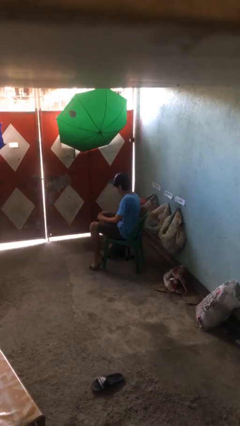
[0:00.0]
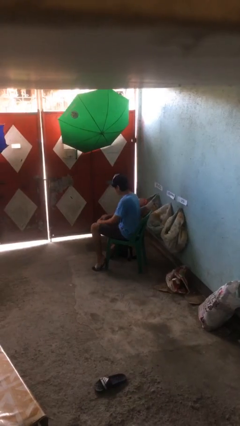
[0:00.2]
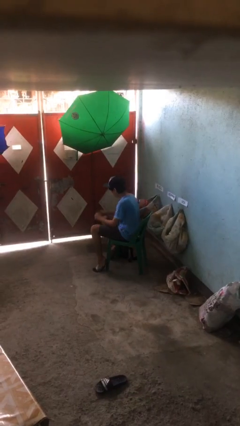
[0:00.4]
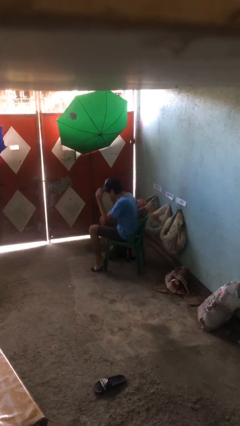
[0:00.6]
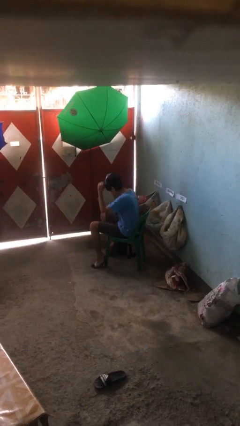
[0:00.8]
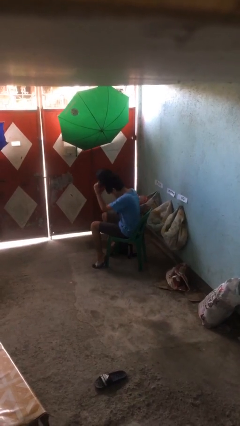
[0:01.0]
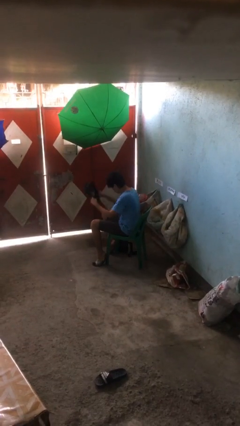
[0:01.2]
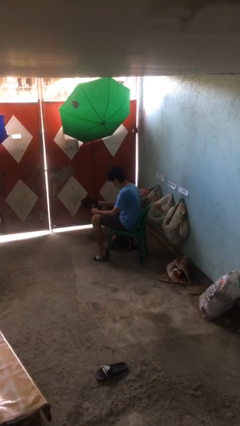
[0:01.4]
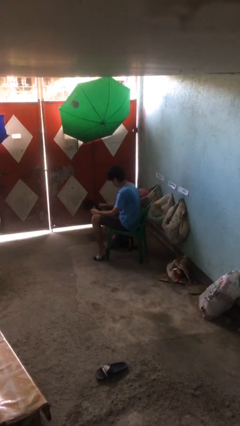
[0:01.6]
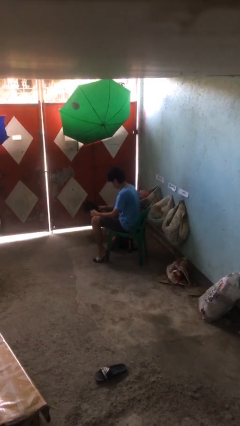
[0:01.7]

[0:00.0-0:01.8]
person takes off hat

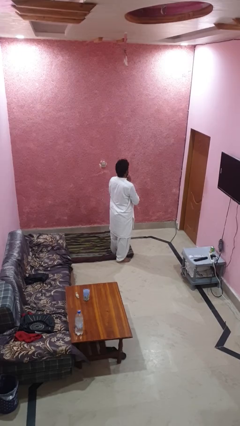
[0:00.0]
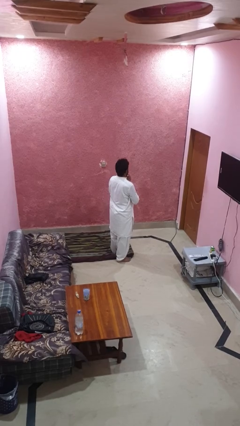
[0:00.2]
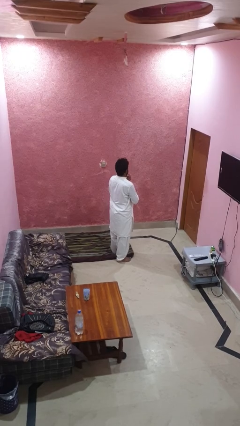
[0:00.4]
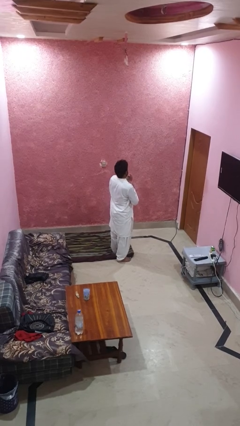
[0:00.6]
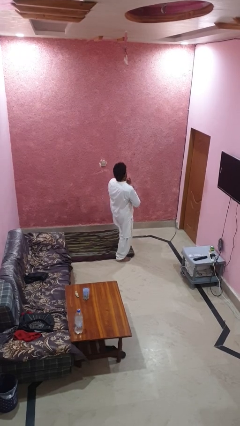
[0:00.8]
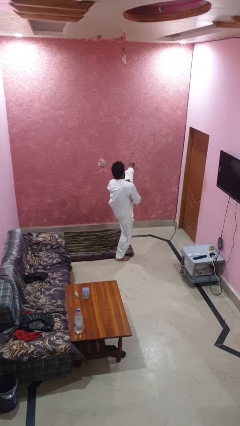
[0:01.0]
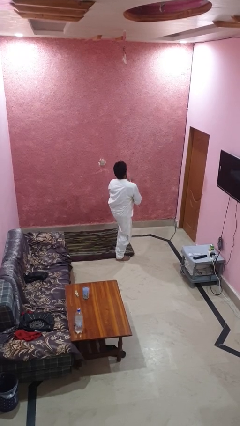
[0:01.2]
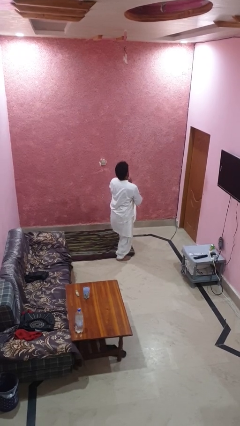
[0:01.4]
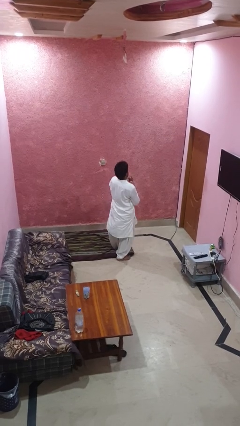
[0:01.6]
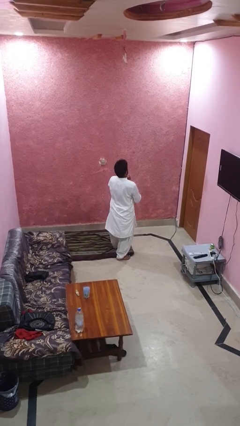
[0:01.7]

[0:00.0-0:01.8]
person karate kicks

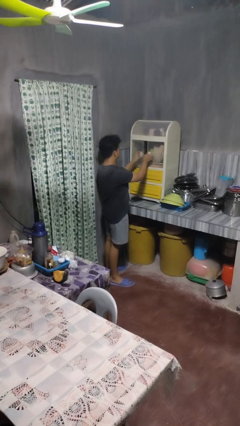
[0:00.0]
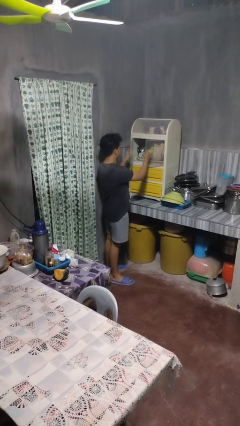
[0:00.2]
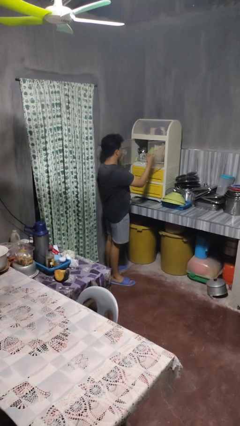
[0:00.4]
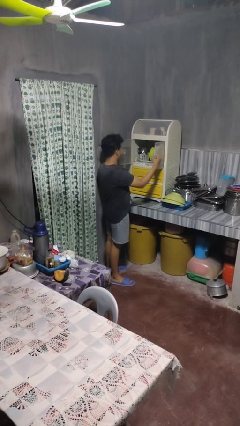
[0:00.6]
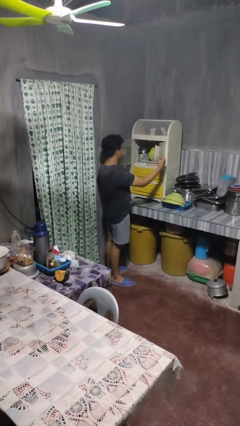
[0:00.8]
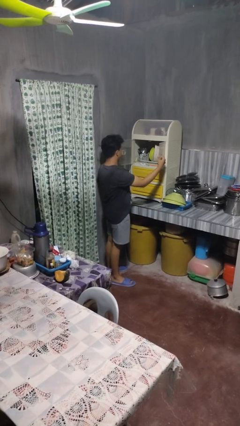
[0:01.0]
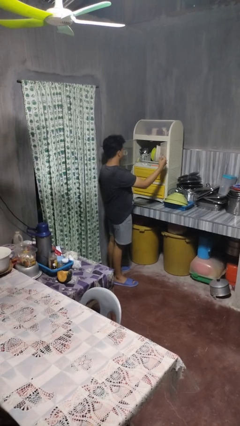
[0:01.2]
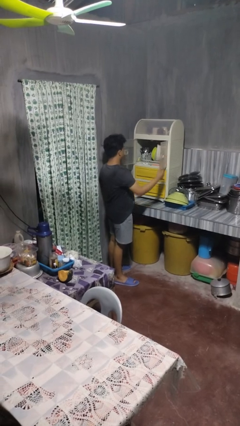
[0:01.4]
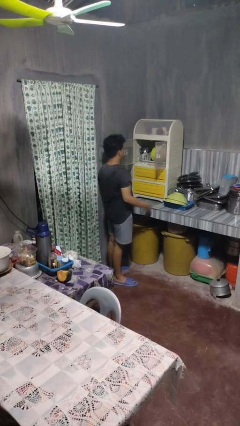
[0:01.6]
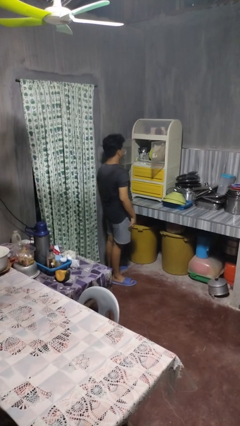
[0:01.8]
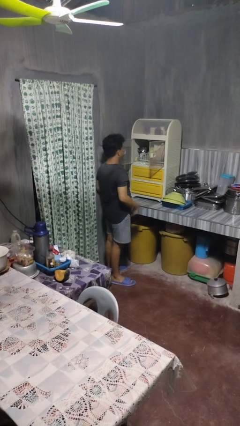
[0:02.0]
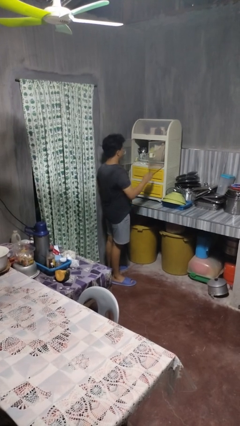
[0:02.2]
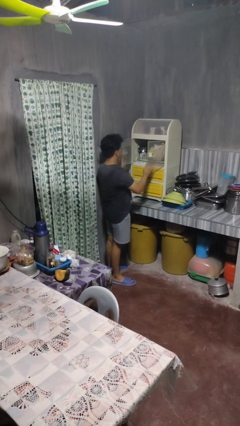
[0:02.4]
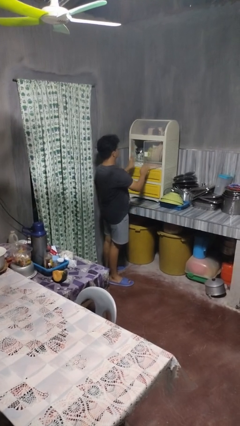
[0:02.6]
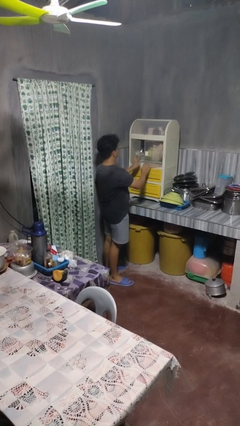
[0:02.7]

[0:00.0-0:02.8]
person opens cabinet

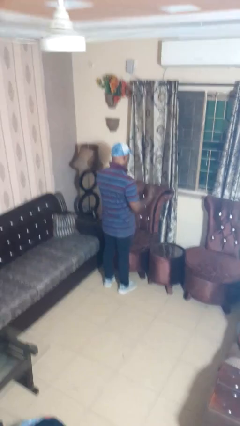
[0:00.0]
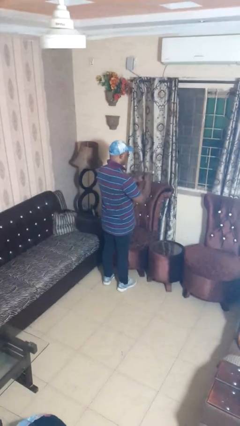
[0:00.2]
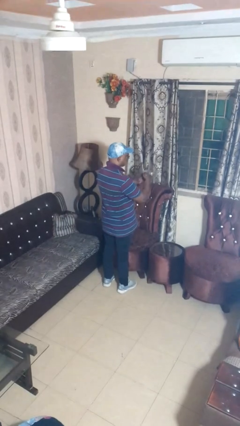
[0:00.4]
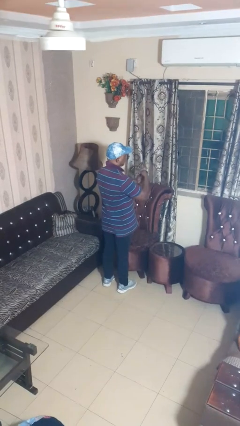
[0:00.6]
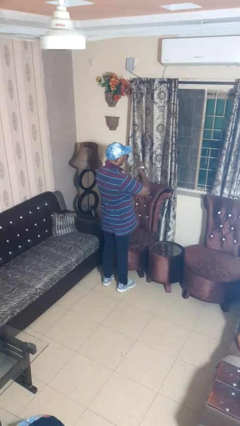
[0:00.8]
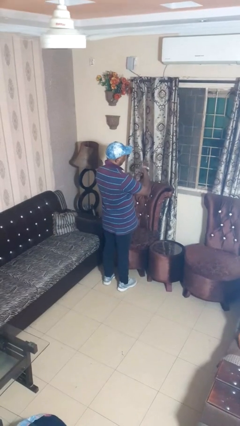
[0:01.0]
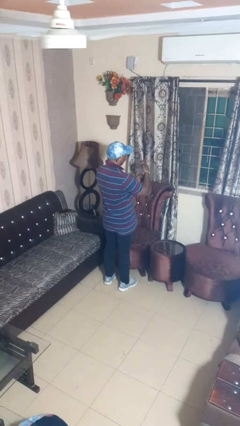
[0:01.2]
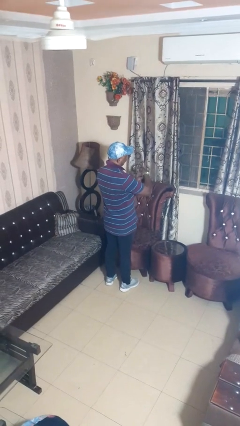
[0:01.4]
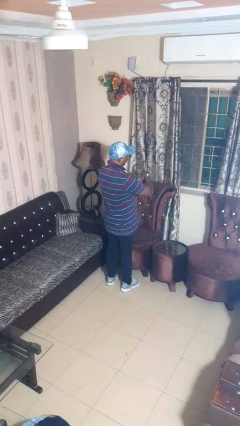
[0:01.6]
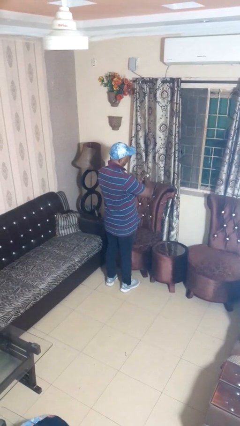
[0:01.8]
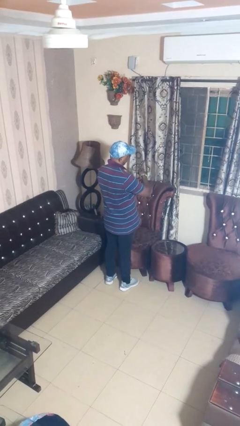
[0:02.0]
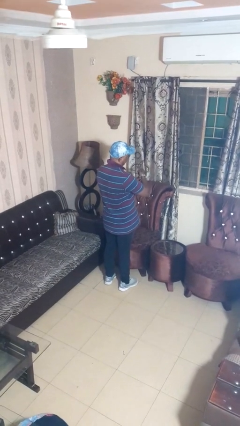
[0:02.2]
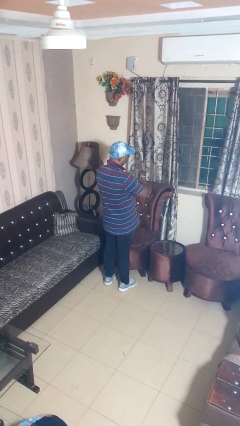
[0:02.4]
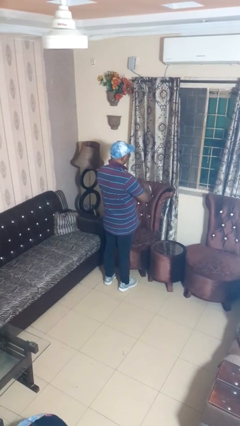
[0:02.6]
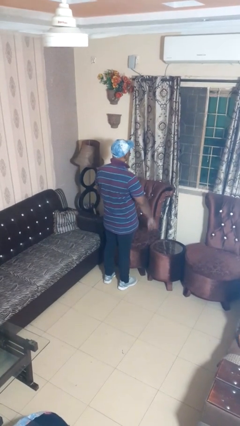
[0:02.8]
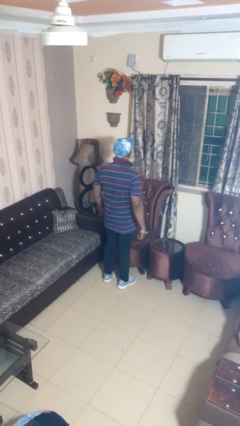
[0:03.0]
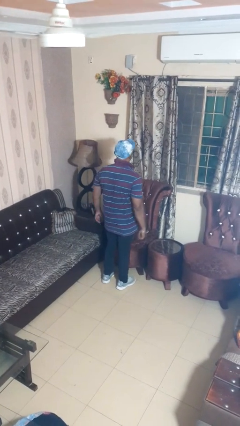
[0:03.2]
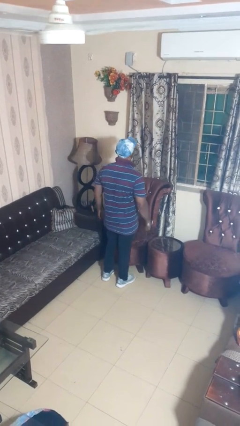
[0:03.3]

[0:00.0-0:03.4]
person puts on wristwatch

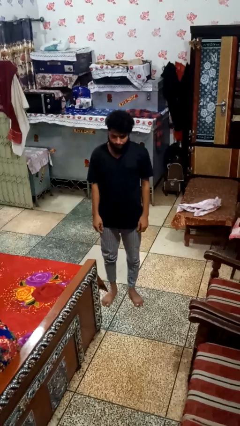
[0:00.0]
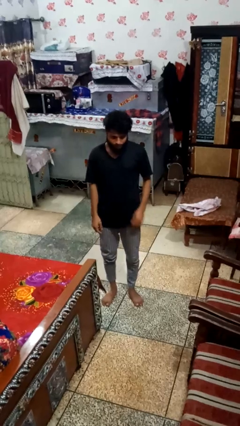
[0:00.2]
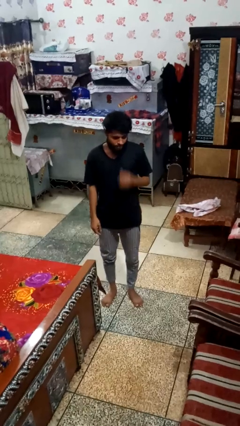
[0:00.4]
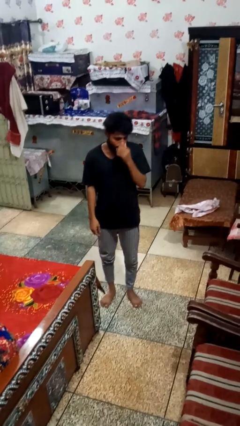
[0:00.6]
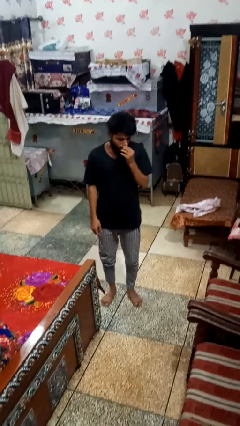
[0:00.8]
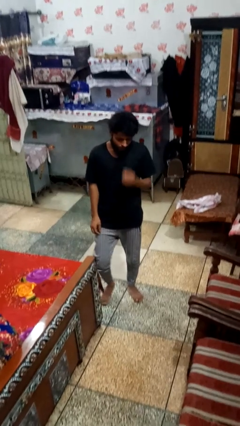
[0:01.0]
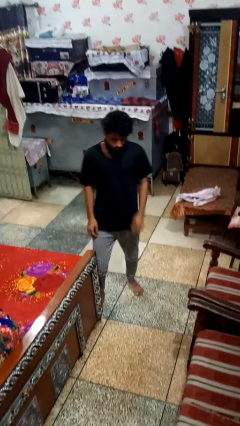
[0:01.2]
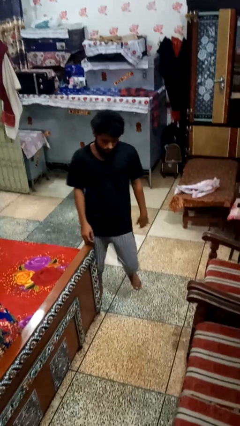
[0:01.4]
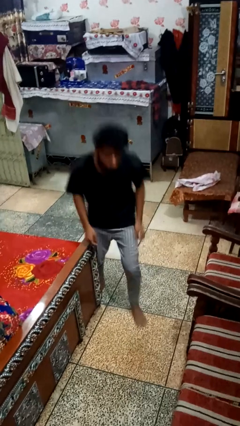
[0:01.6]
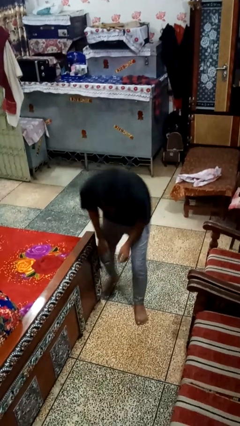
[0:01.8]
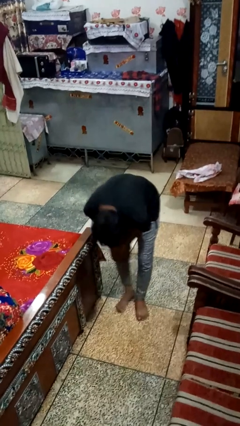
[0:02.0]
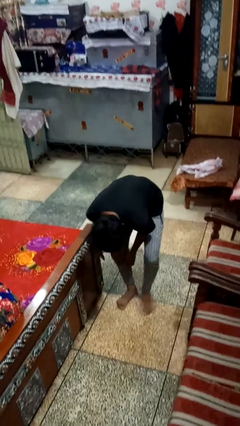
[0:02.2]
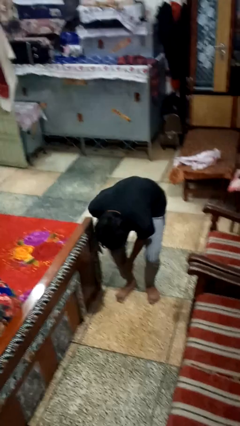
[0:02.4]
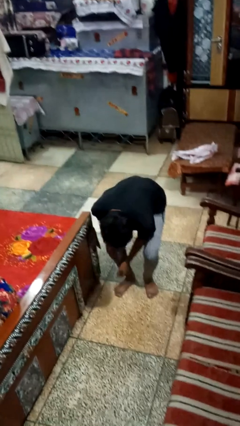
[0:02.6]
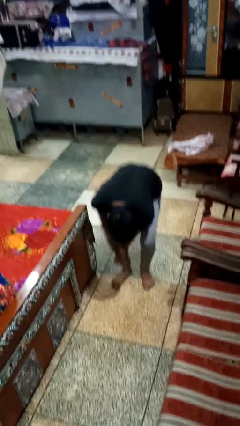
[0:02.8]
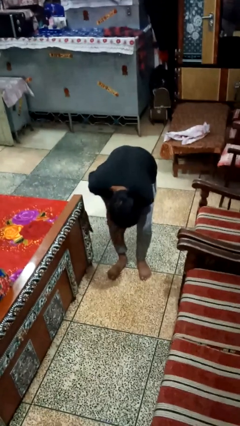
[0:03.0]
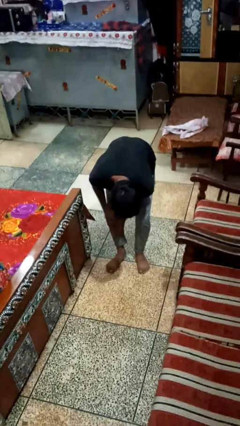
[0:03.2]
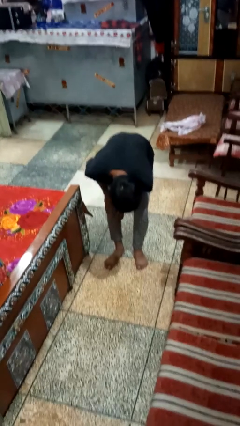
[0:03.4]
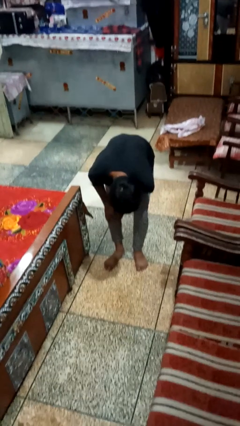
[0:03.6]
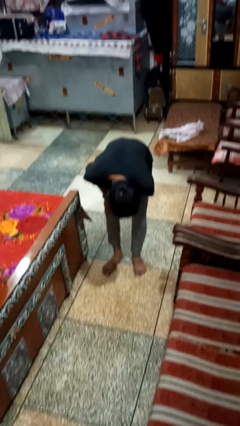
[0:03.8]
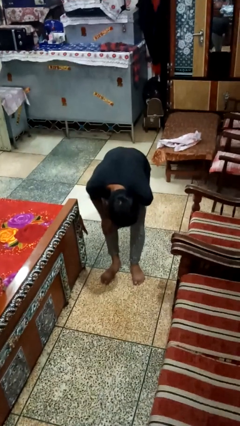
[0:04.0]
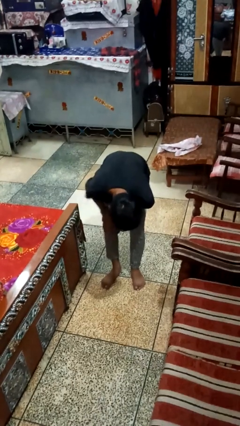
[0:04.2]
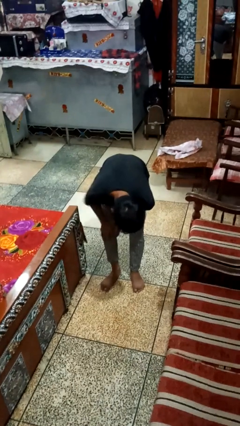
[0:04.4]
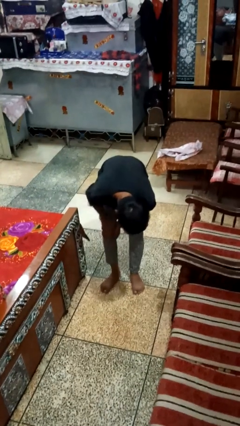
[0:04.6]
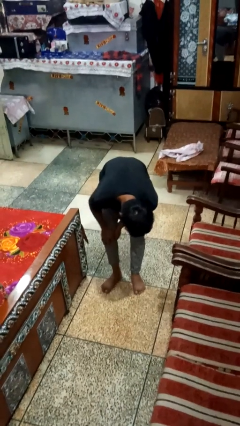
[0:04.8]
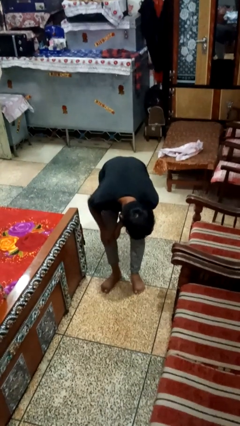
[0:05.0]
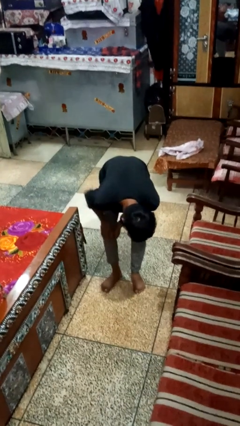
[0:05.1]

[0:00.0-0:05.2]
person trips on object on floor

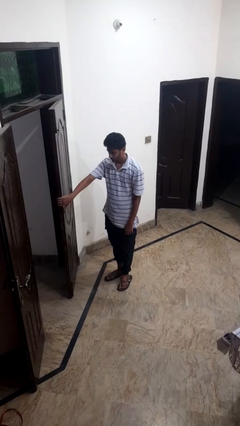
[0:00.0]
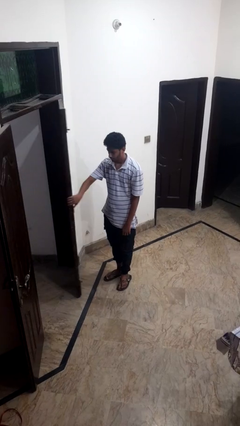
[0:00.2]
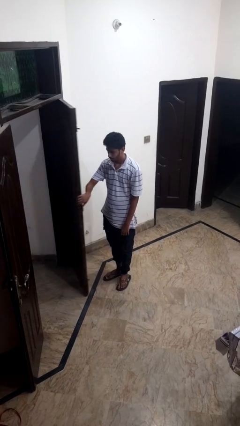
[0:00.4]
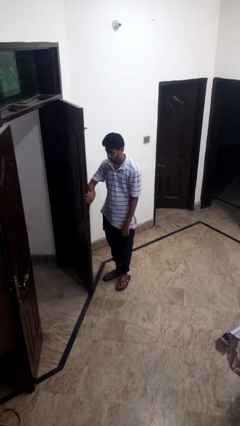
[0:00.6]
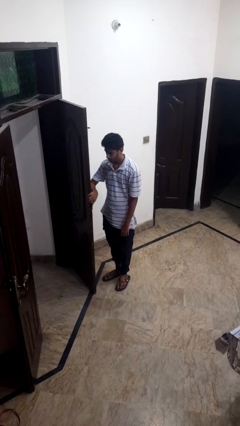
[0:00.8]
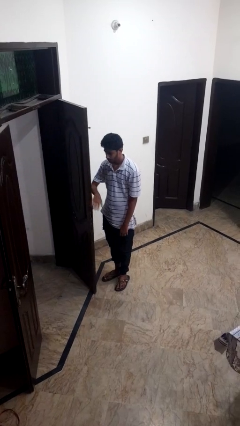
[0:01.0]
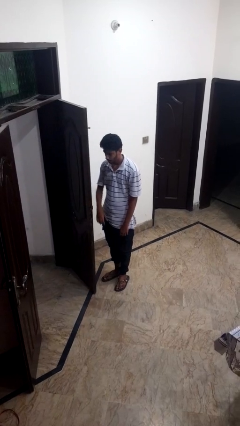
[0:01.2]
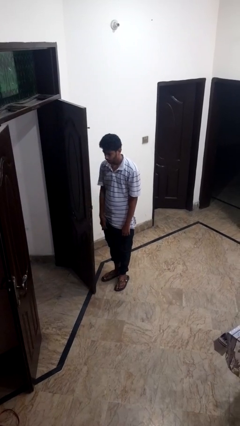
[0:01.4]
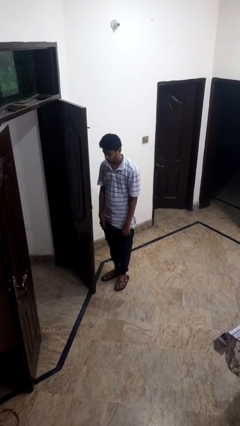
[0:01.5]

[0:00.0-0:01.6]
person opens facility door

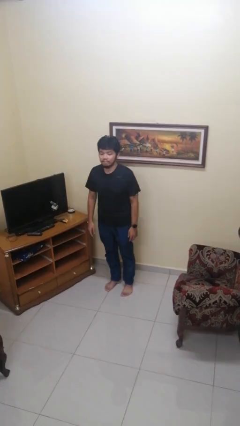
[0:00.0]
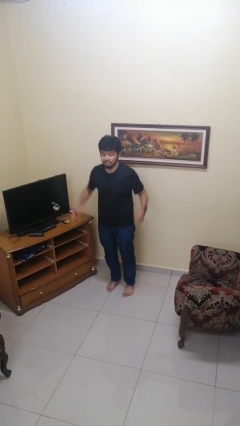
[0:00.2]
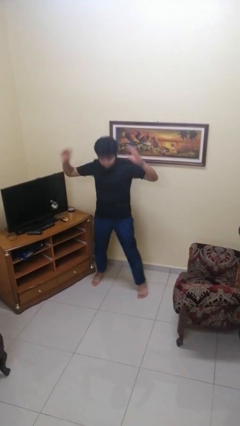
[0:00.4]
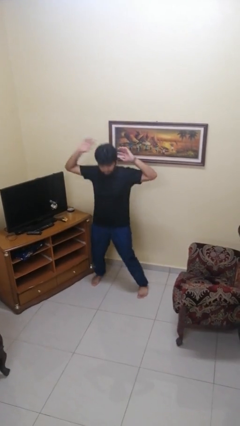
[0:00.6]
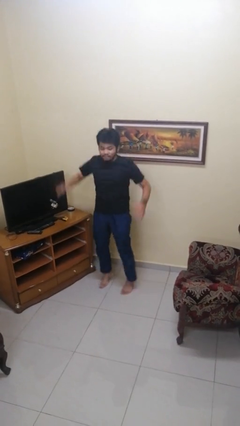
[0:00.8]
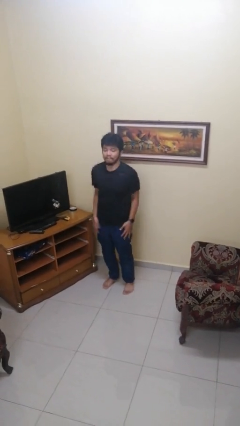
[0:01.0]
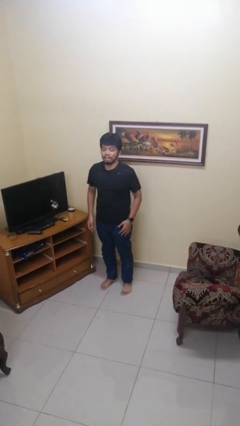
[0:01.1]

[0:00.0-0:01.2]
person exercises with jumping jacks
